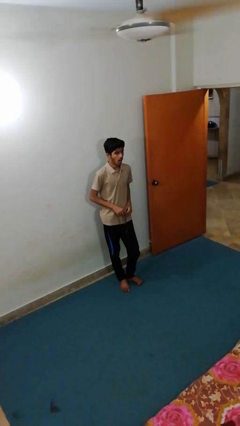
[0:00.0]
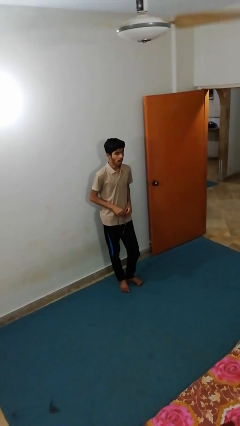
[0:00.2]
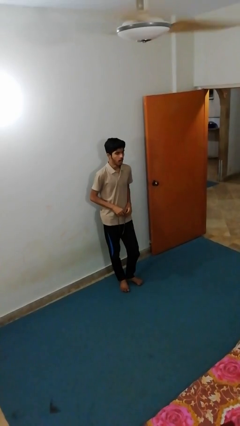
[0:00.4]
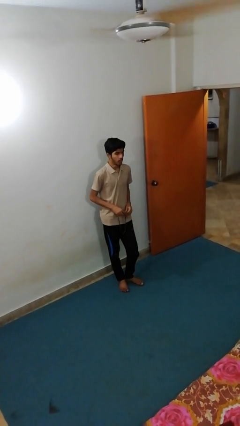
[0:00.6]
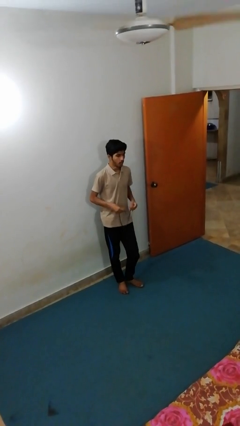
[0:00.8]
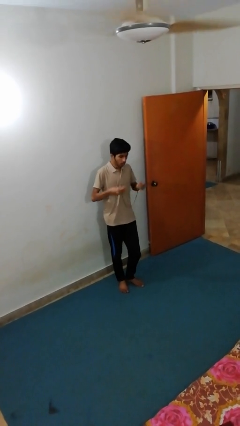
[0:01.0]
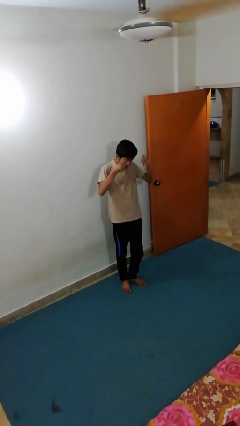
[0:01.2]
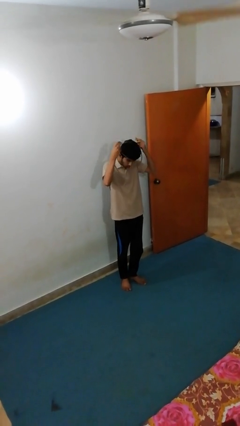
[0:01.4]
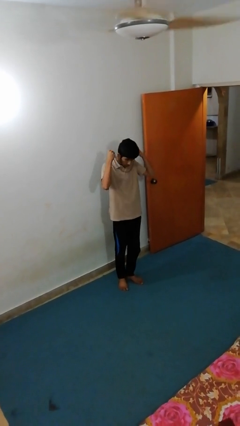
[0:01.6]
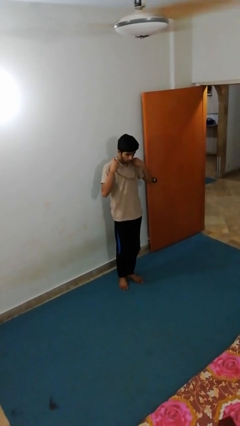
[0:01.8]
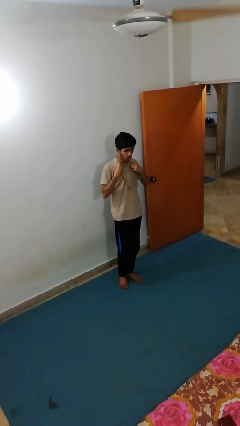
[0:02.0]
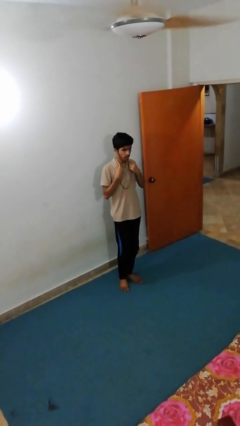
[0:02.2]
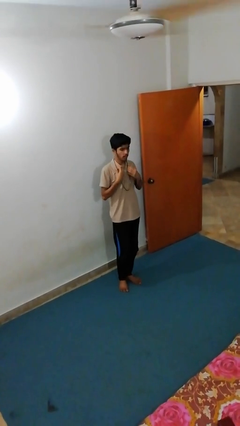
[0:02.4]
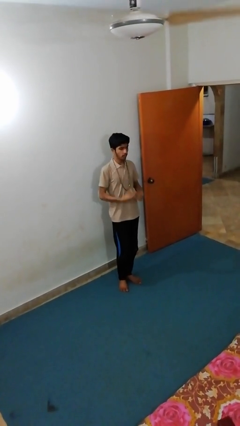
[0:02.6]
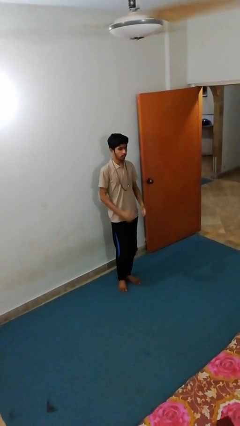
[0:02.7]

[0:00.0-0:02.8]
person puts on necklace

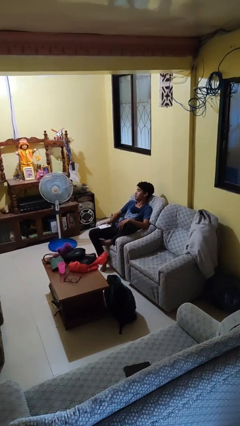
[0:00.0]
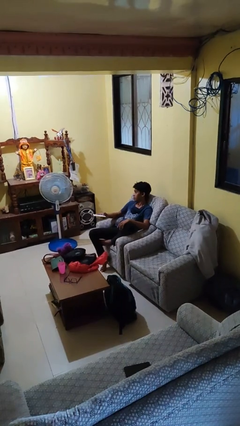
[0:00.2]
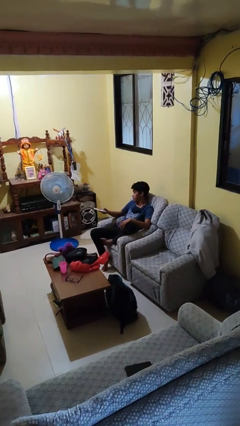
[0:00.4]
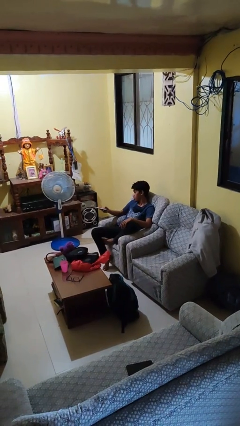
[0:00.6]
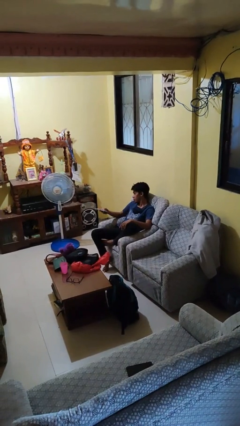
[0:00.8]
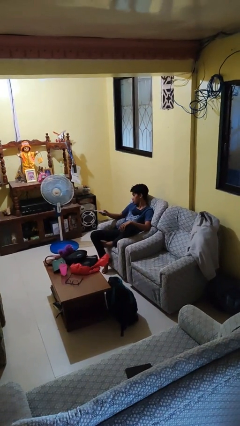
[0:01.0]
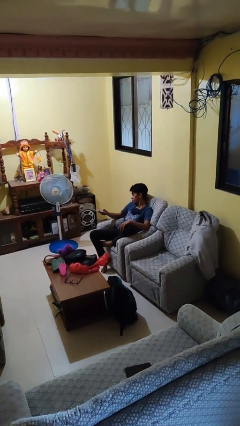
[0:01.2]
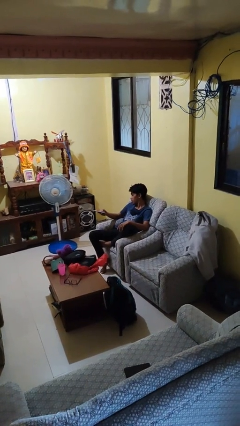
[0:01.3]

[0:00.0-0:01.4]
person uses television remote

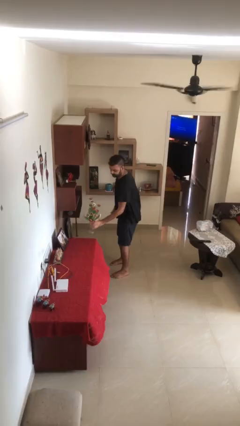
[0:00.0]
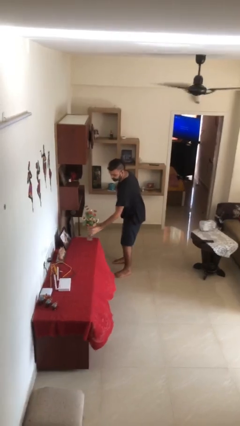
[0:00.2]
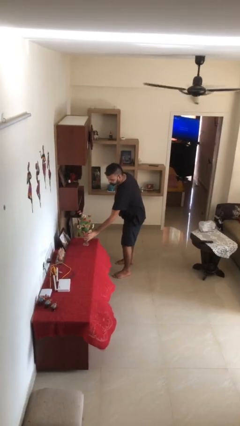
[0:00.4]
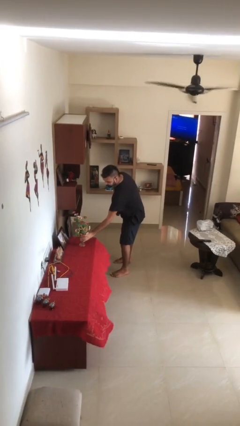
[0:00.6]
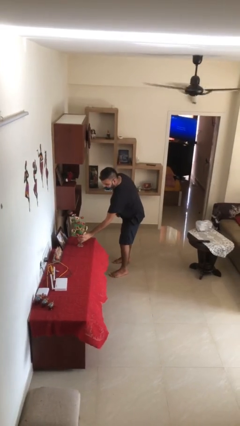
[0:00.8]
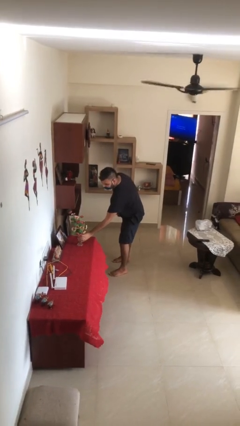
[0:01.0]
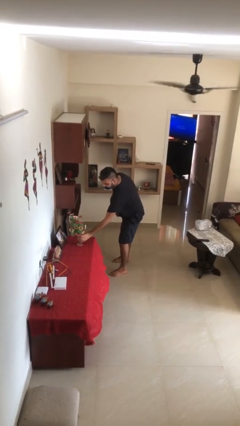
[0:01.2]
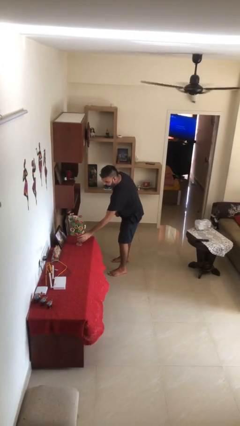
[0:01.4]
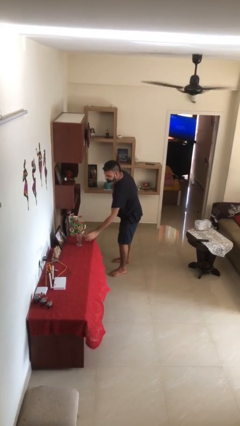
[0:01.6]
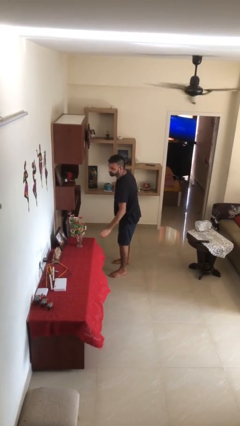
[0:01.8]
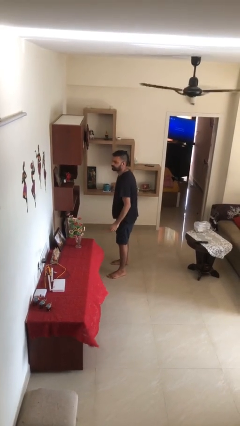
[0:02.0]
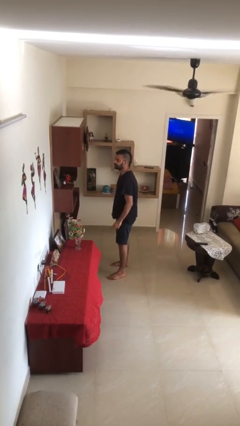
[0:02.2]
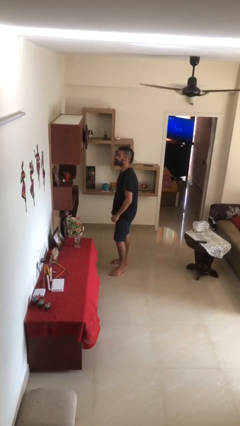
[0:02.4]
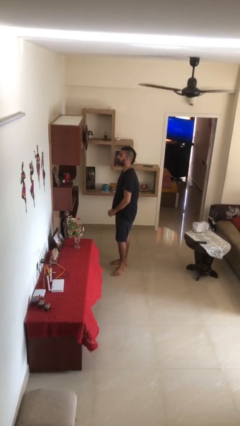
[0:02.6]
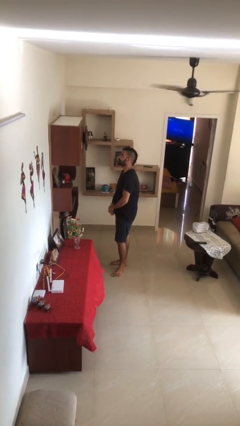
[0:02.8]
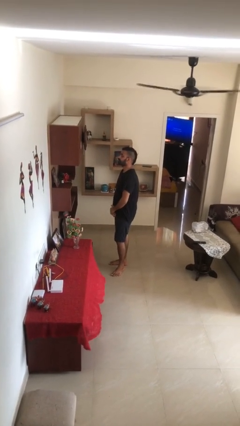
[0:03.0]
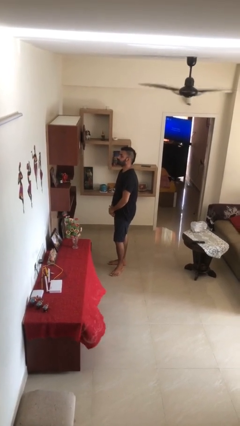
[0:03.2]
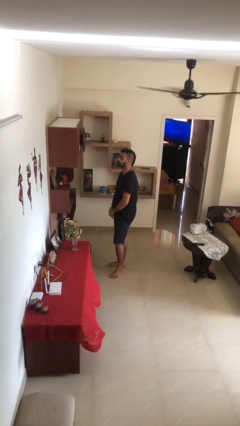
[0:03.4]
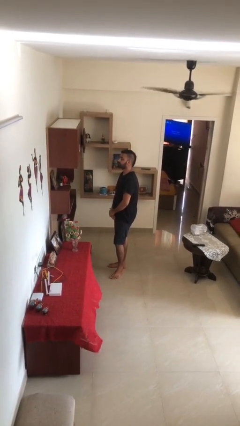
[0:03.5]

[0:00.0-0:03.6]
person puts down object on table

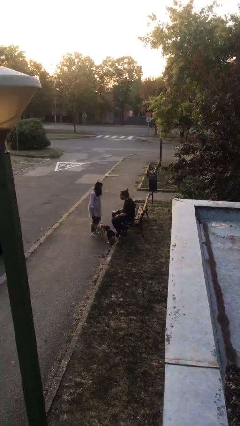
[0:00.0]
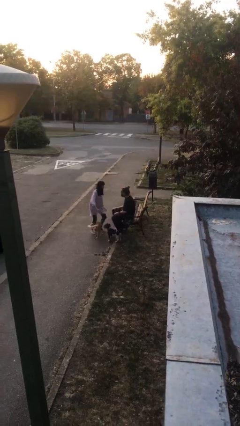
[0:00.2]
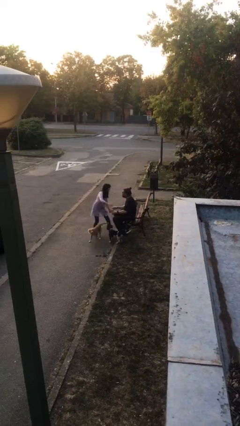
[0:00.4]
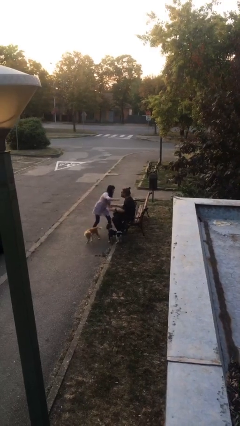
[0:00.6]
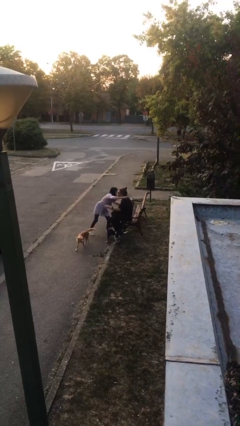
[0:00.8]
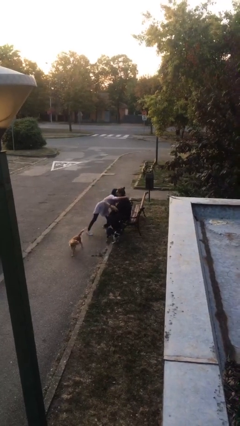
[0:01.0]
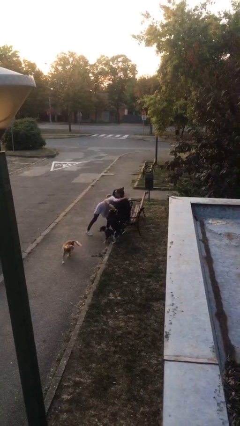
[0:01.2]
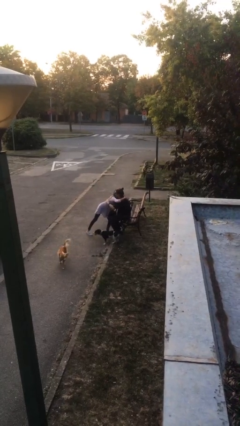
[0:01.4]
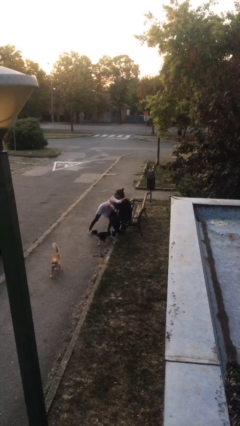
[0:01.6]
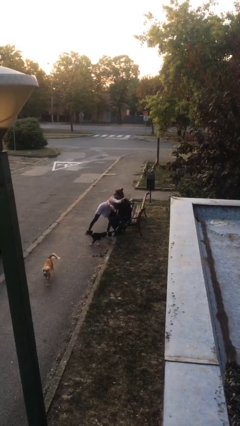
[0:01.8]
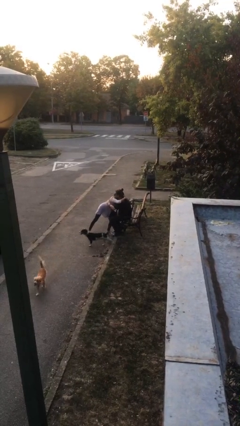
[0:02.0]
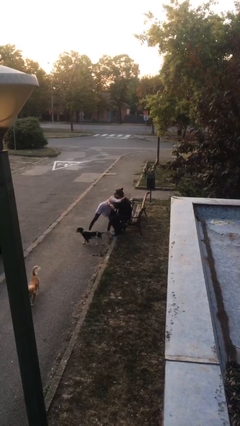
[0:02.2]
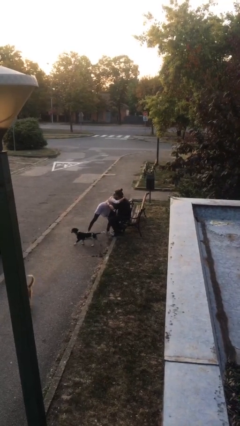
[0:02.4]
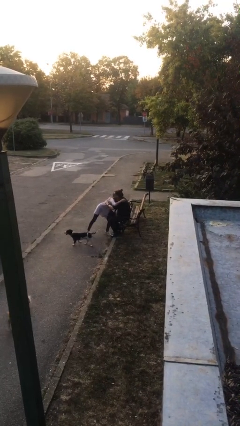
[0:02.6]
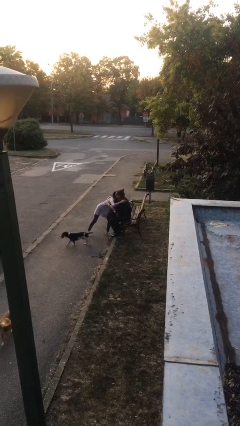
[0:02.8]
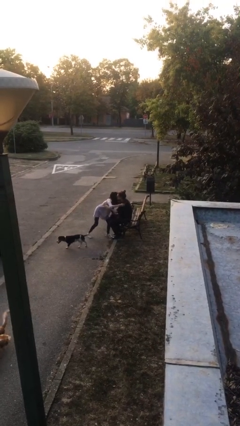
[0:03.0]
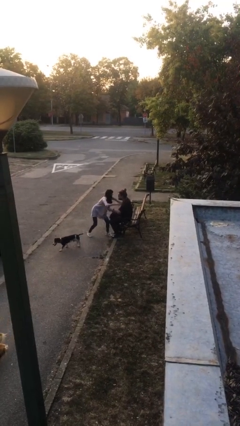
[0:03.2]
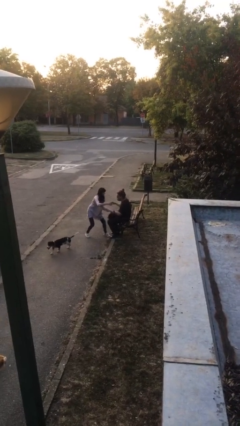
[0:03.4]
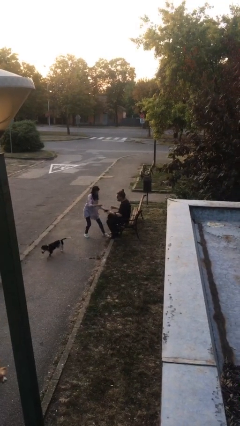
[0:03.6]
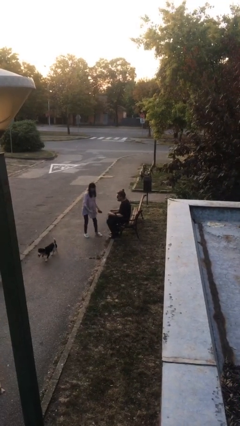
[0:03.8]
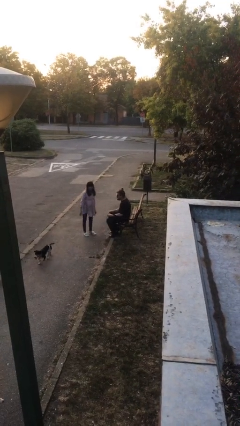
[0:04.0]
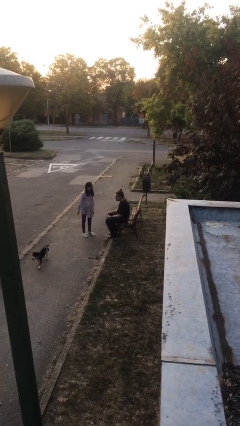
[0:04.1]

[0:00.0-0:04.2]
person embraces person

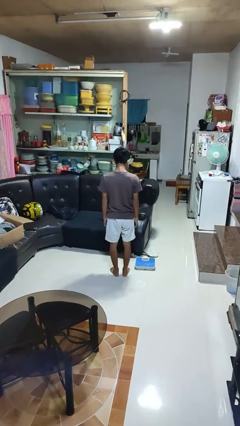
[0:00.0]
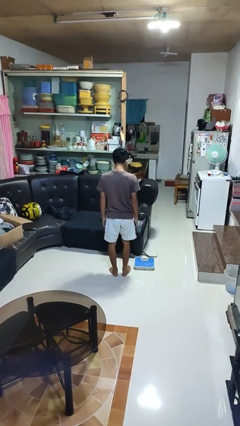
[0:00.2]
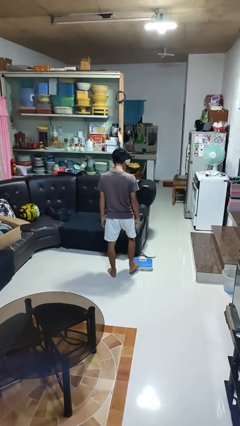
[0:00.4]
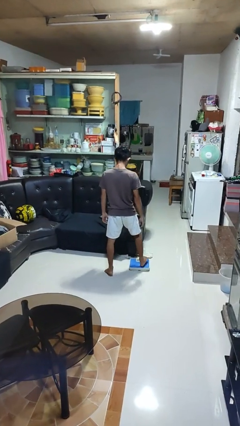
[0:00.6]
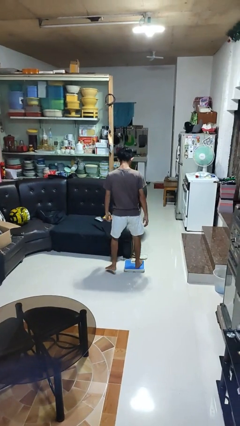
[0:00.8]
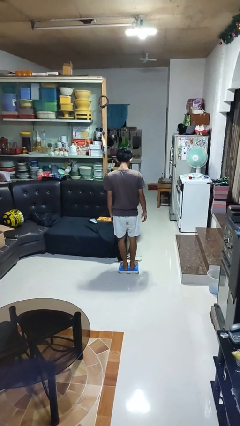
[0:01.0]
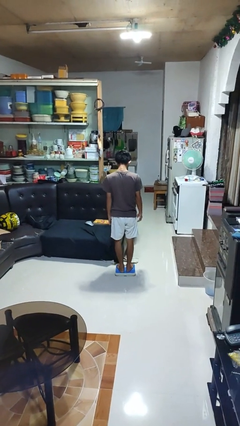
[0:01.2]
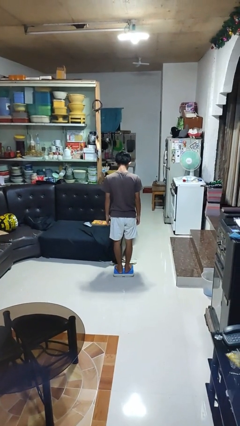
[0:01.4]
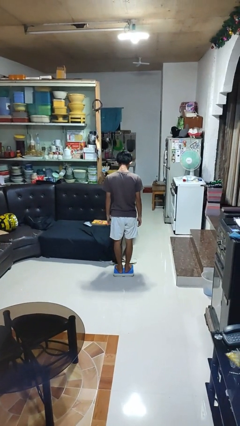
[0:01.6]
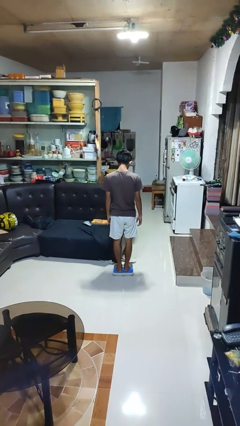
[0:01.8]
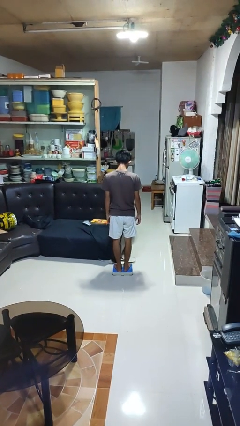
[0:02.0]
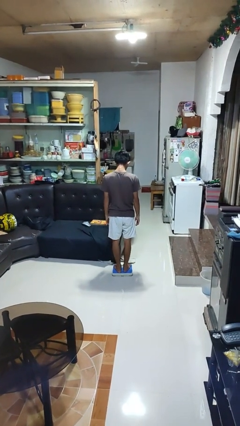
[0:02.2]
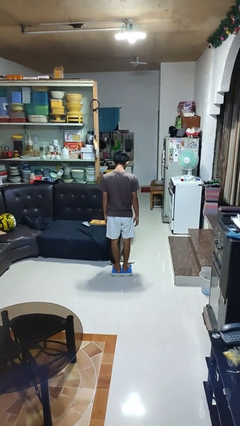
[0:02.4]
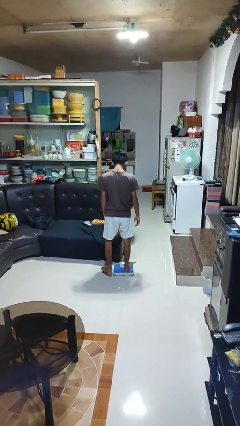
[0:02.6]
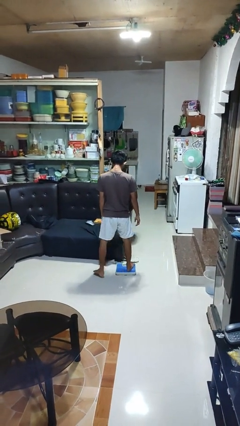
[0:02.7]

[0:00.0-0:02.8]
person uses bodyweight scale

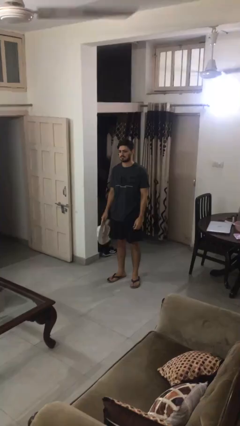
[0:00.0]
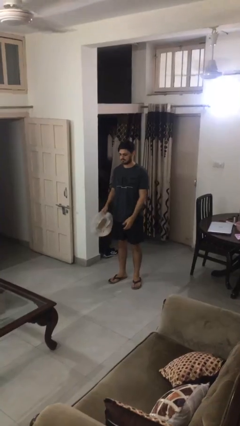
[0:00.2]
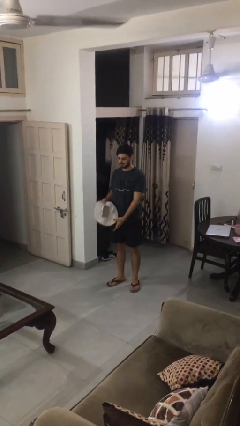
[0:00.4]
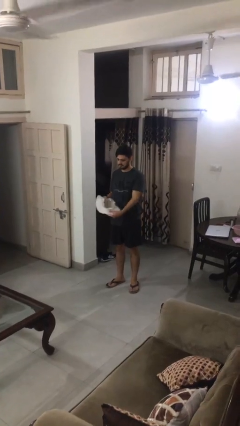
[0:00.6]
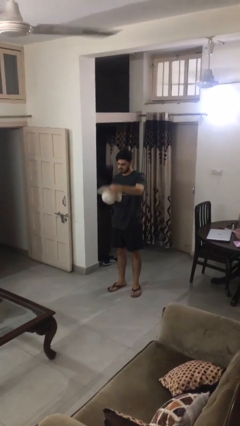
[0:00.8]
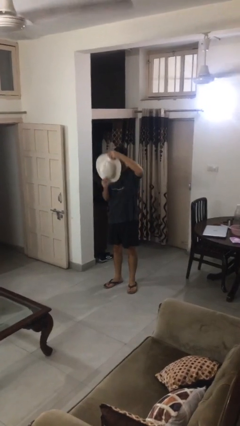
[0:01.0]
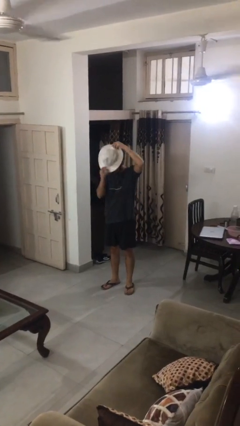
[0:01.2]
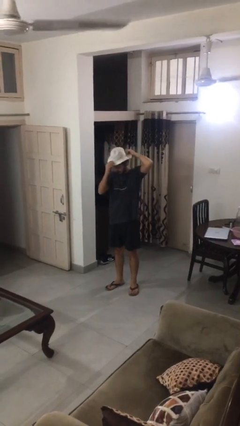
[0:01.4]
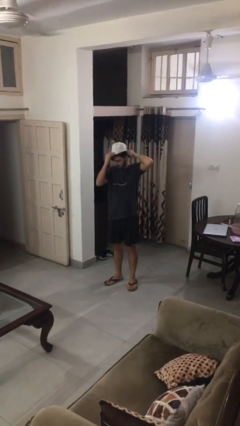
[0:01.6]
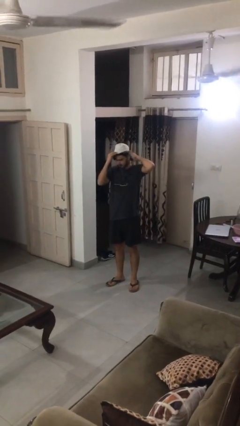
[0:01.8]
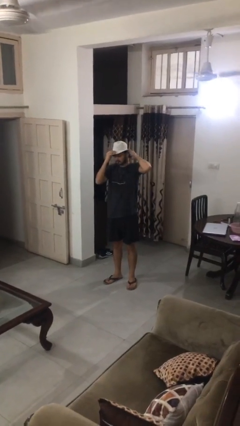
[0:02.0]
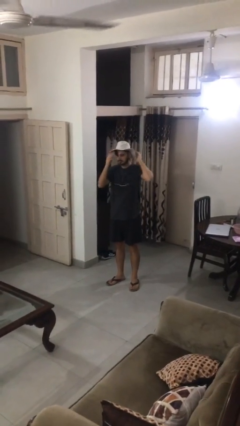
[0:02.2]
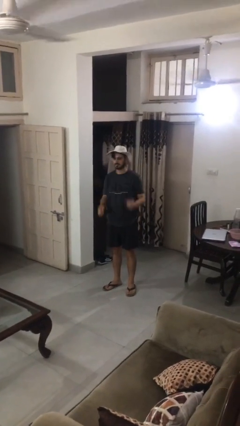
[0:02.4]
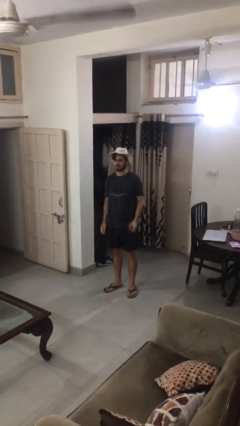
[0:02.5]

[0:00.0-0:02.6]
person puts on hat
